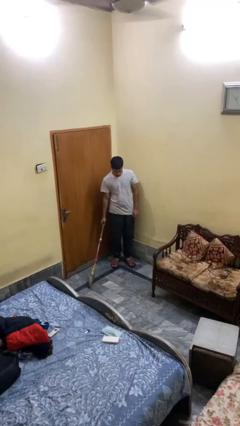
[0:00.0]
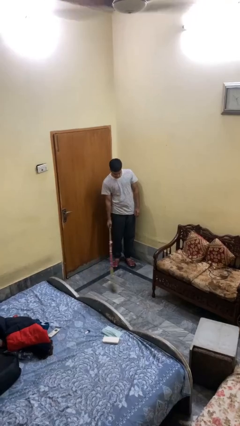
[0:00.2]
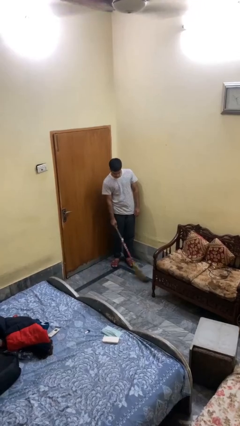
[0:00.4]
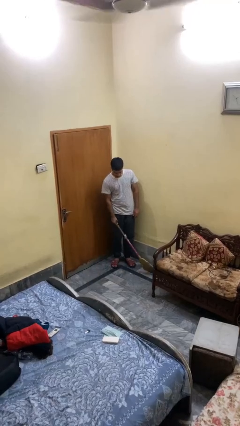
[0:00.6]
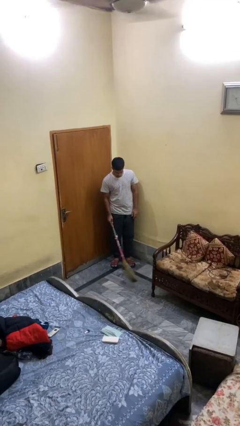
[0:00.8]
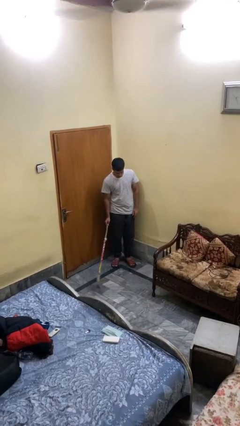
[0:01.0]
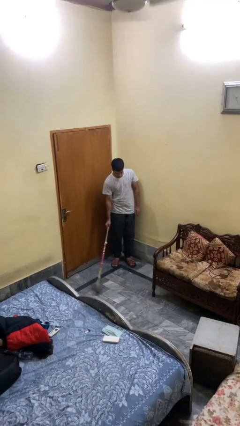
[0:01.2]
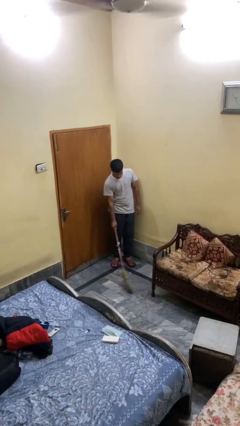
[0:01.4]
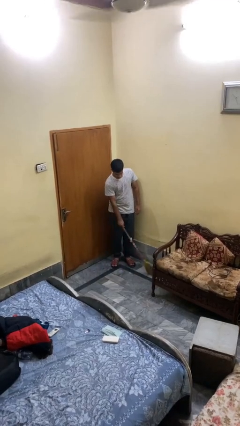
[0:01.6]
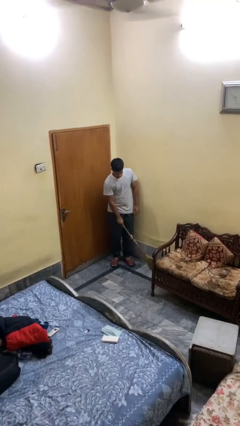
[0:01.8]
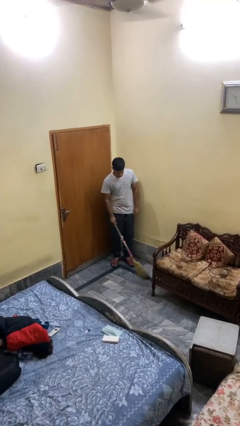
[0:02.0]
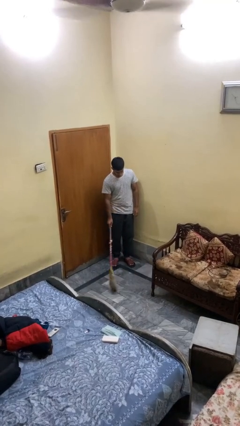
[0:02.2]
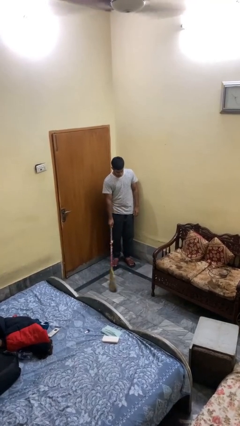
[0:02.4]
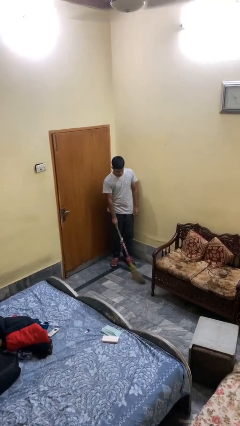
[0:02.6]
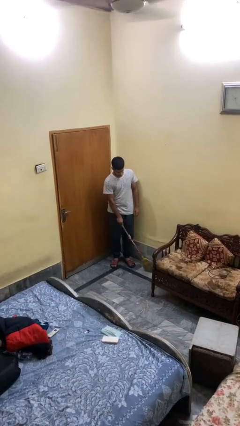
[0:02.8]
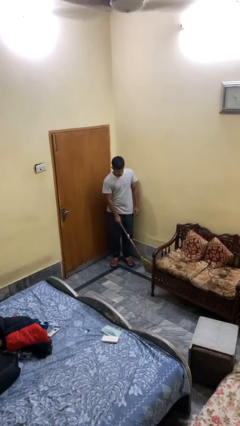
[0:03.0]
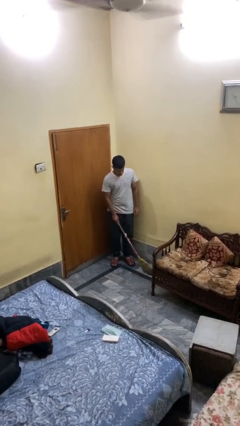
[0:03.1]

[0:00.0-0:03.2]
person sweeps floor

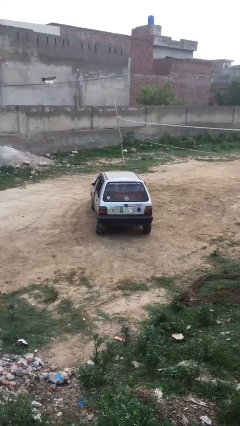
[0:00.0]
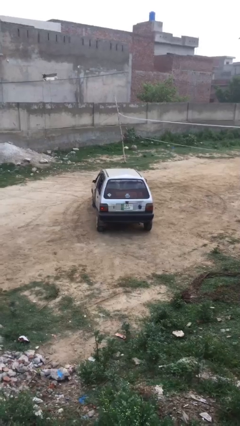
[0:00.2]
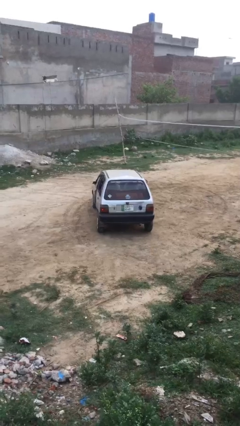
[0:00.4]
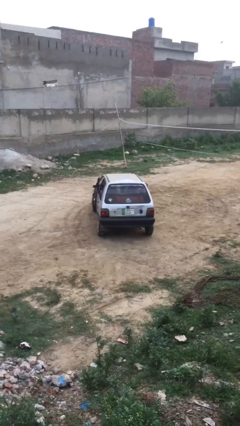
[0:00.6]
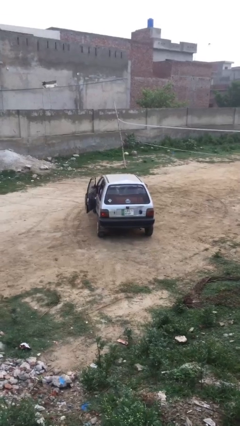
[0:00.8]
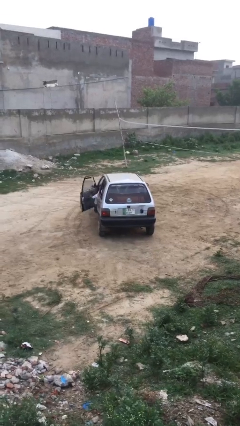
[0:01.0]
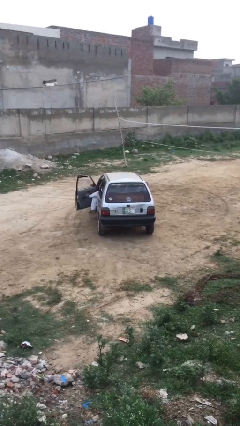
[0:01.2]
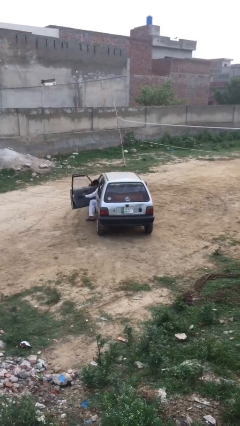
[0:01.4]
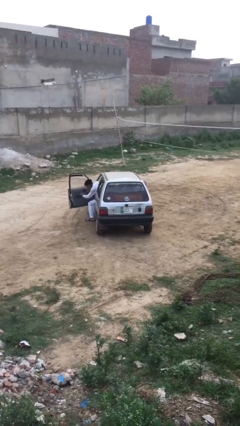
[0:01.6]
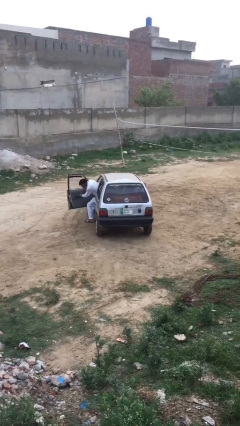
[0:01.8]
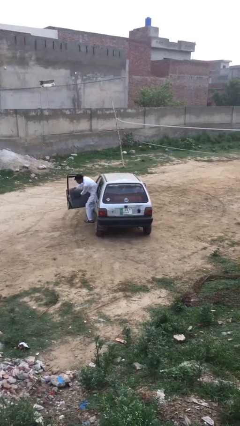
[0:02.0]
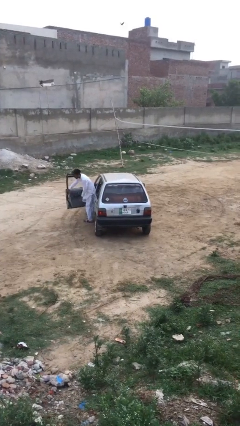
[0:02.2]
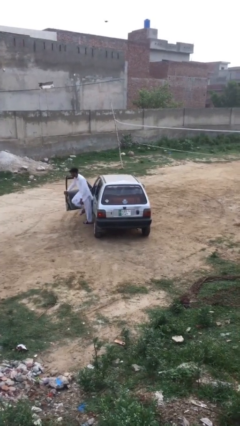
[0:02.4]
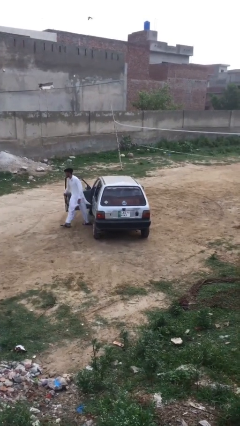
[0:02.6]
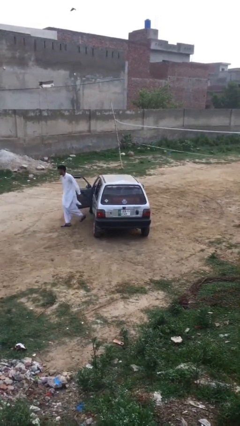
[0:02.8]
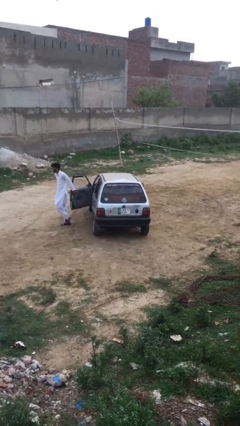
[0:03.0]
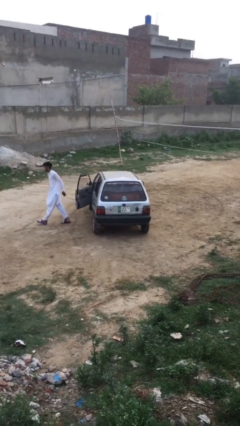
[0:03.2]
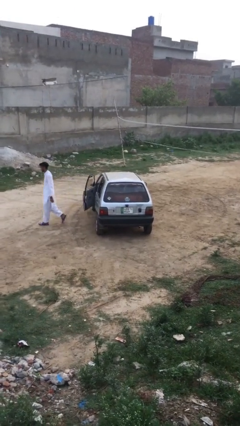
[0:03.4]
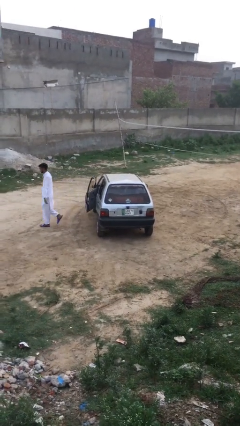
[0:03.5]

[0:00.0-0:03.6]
car drops off person

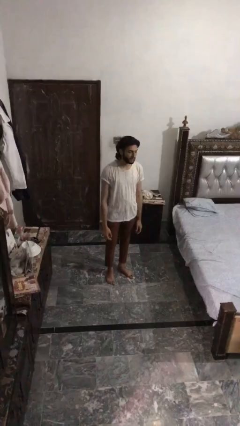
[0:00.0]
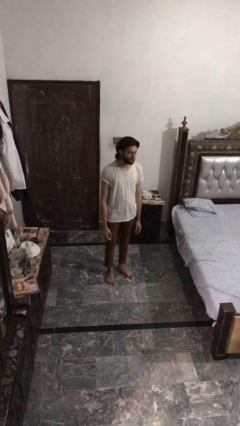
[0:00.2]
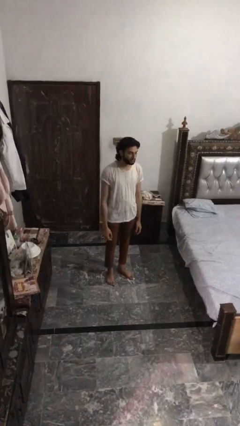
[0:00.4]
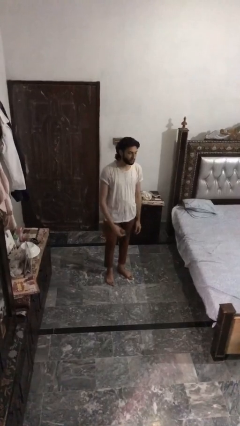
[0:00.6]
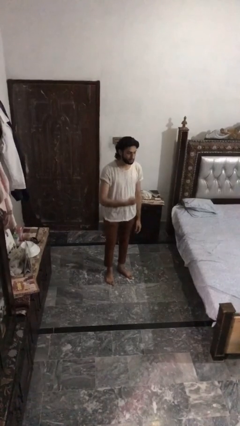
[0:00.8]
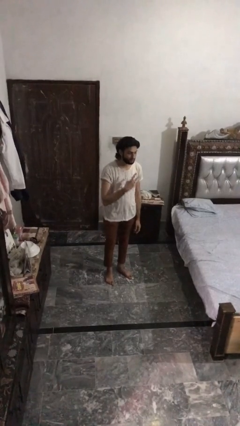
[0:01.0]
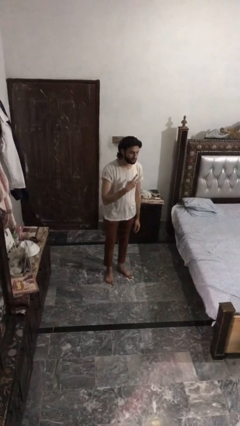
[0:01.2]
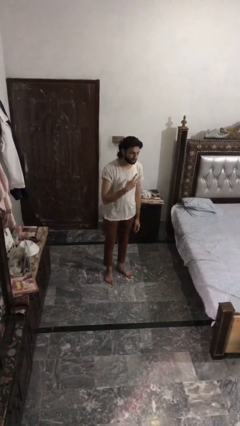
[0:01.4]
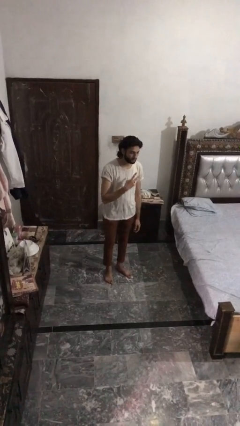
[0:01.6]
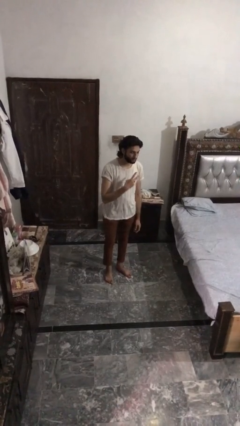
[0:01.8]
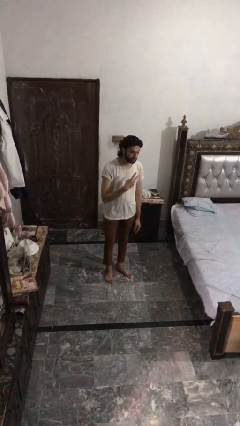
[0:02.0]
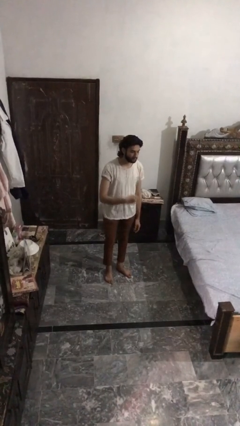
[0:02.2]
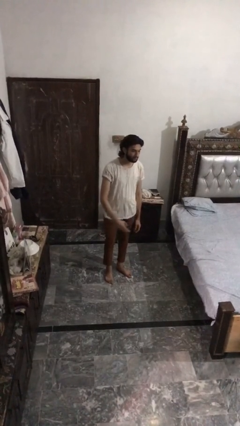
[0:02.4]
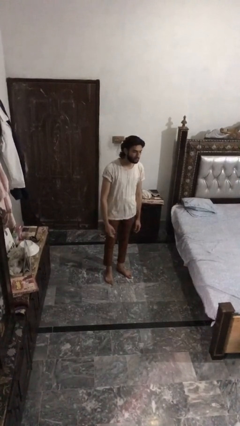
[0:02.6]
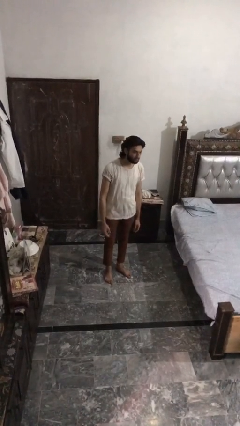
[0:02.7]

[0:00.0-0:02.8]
person gestures peace

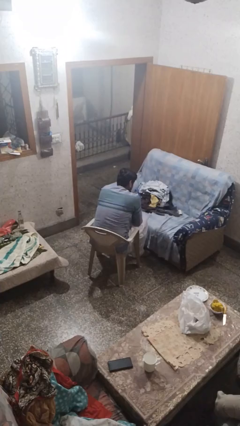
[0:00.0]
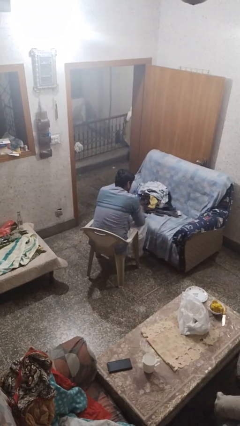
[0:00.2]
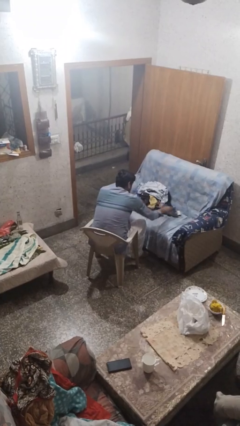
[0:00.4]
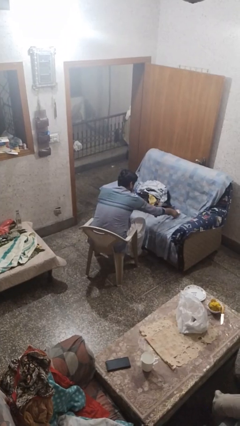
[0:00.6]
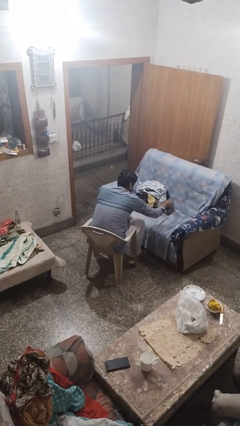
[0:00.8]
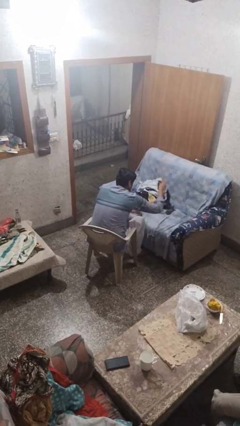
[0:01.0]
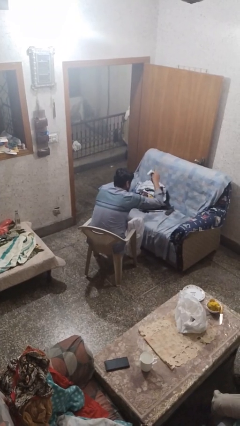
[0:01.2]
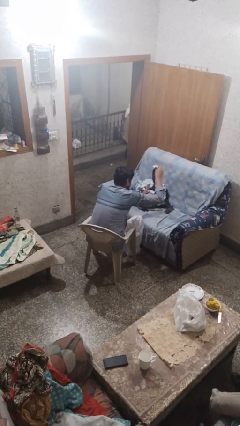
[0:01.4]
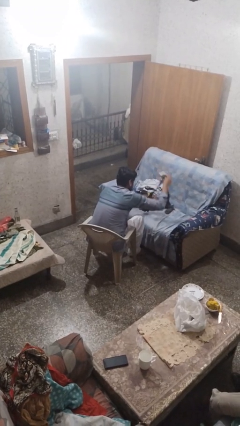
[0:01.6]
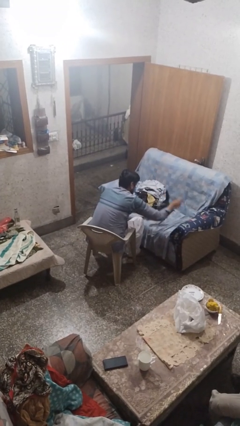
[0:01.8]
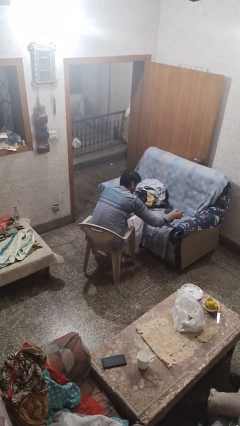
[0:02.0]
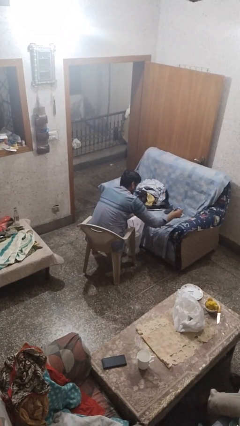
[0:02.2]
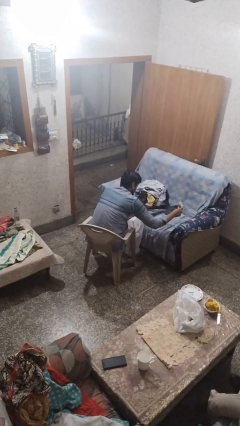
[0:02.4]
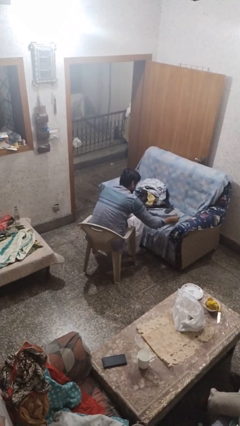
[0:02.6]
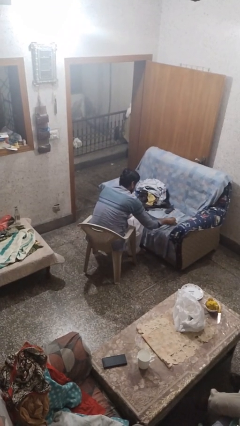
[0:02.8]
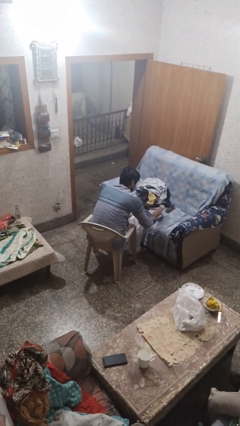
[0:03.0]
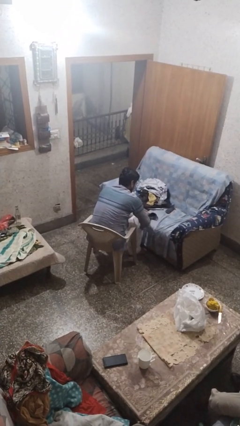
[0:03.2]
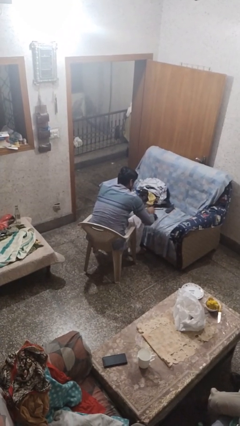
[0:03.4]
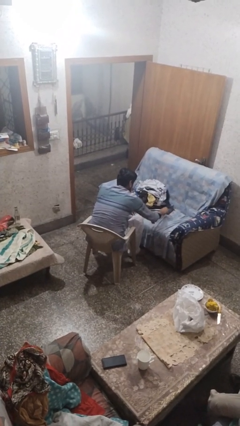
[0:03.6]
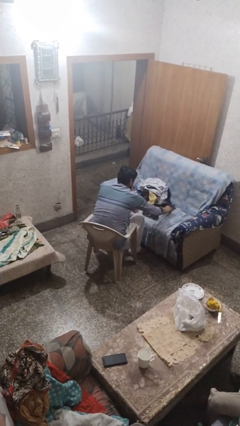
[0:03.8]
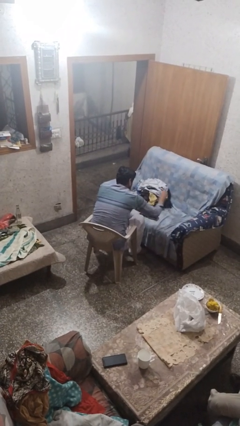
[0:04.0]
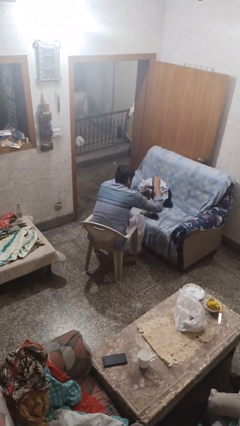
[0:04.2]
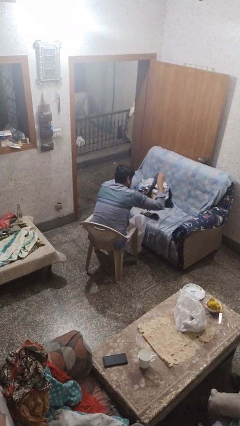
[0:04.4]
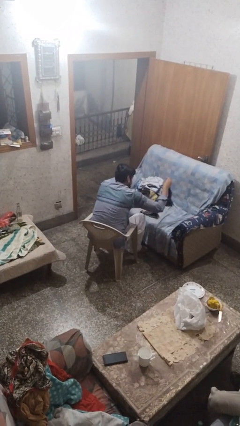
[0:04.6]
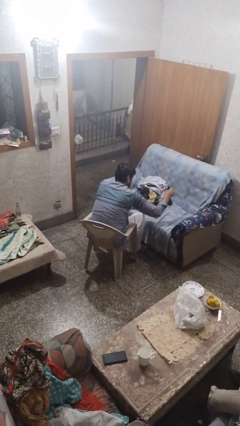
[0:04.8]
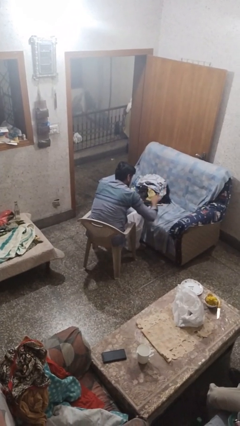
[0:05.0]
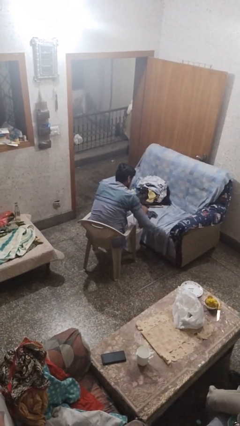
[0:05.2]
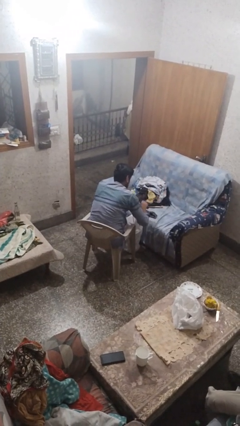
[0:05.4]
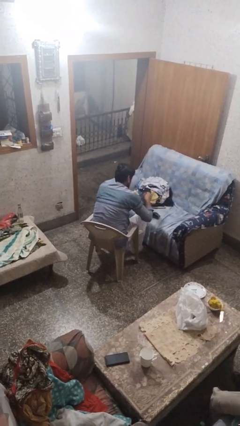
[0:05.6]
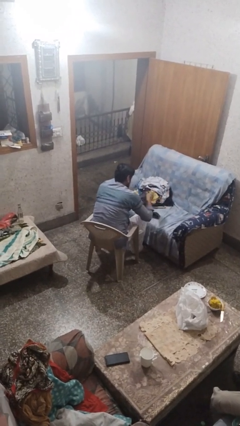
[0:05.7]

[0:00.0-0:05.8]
person folds socks

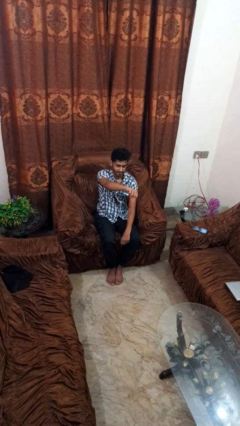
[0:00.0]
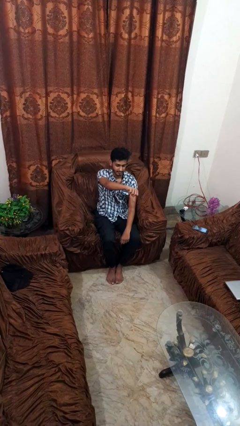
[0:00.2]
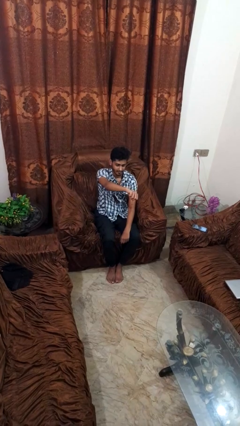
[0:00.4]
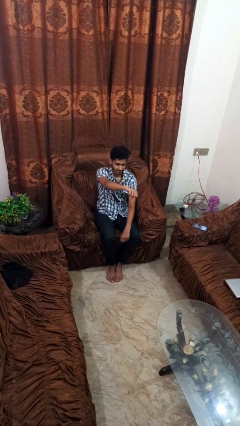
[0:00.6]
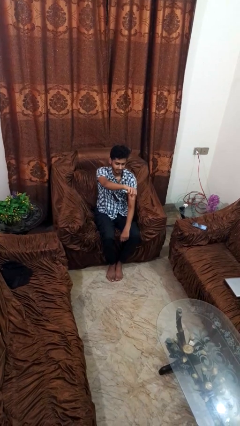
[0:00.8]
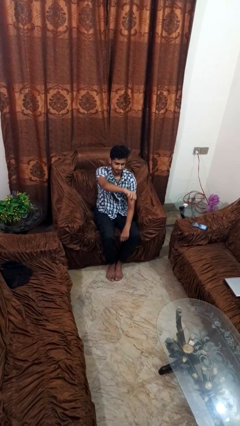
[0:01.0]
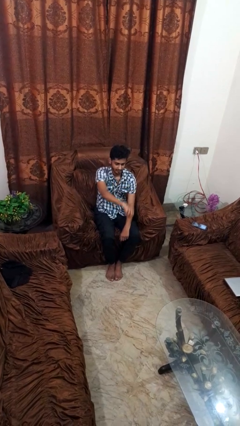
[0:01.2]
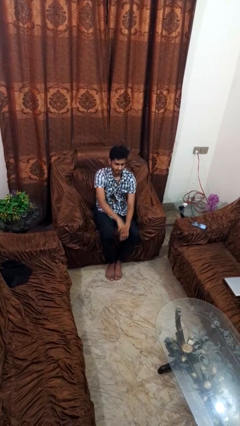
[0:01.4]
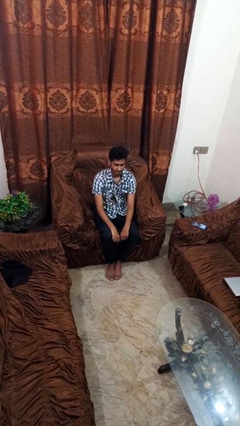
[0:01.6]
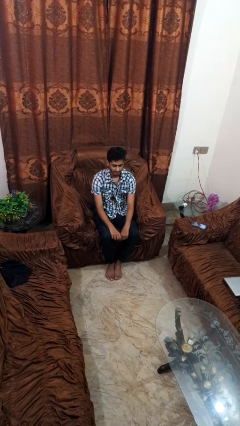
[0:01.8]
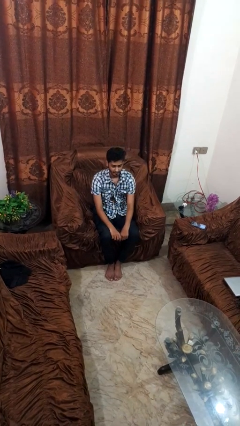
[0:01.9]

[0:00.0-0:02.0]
person gestures thumbs down

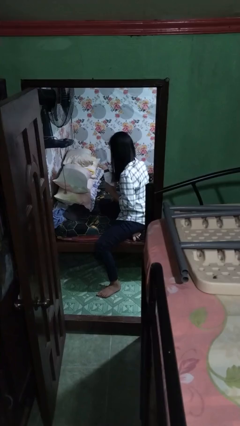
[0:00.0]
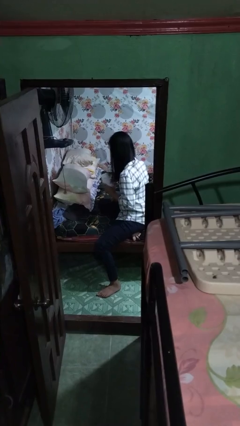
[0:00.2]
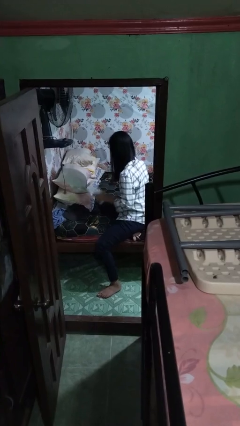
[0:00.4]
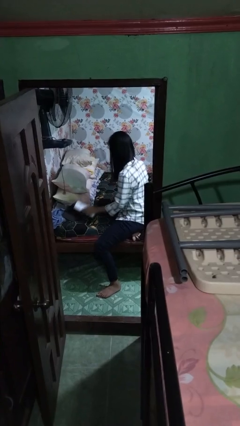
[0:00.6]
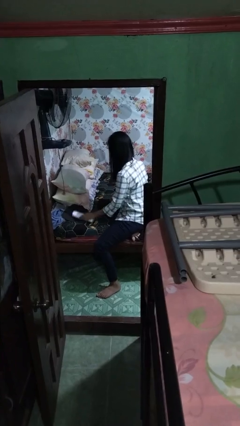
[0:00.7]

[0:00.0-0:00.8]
person puts down object on bed
